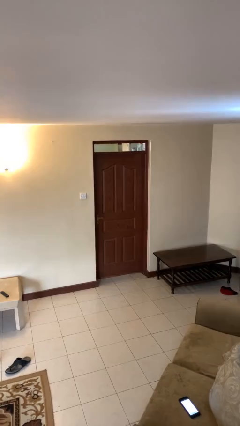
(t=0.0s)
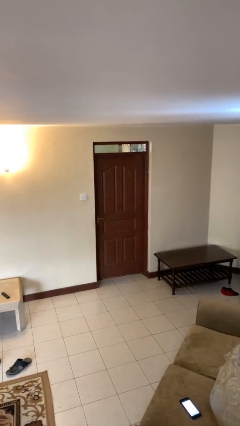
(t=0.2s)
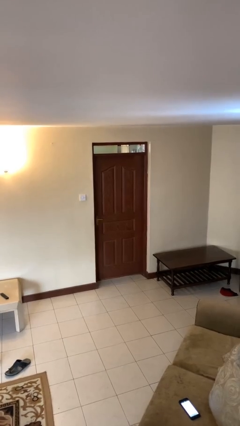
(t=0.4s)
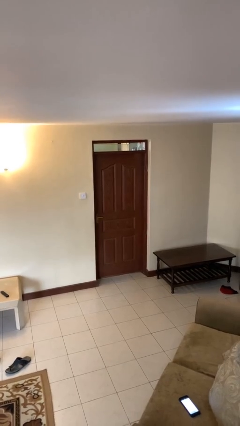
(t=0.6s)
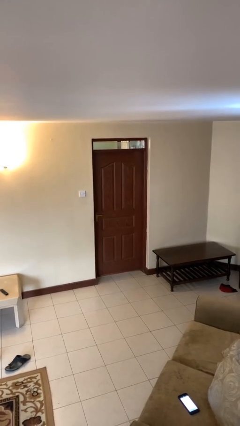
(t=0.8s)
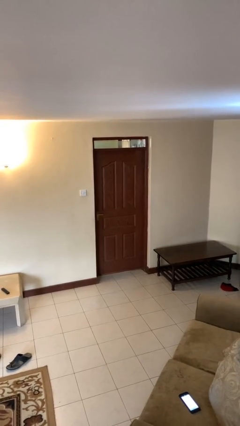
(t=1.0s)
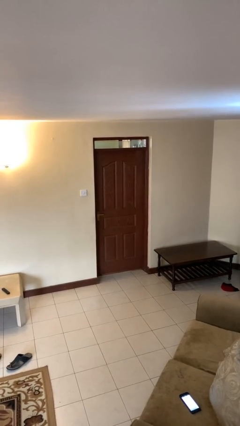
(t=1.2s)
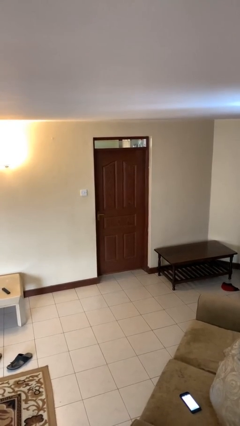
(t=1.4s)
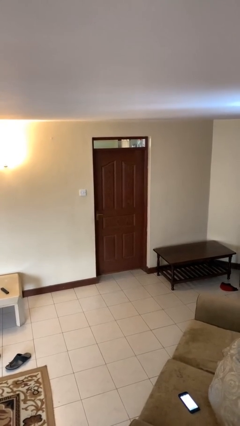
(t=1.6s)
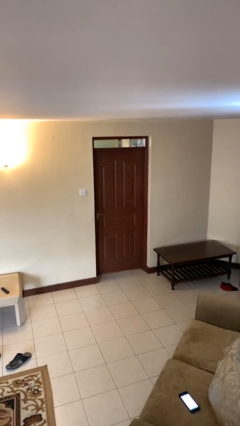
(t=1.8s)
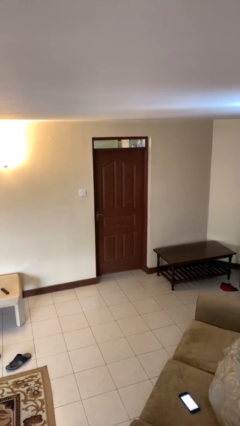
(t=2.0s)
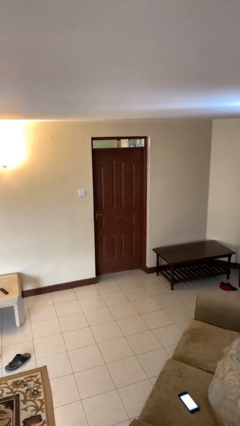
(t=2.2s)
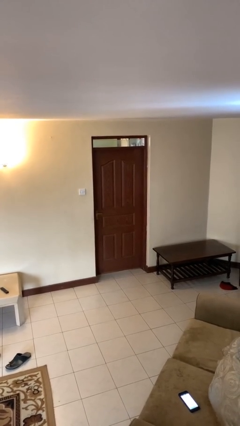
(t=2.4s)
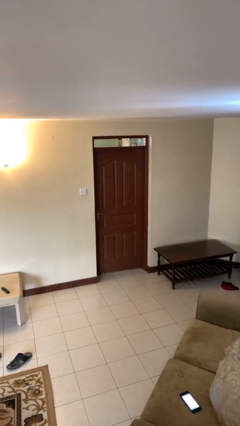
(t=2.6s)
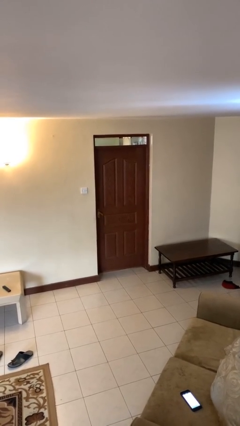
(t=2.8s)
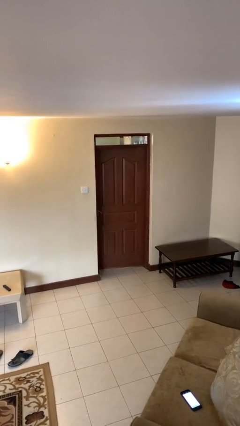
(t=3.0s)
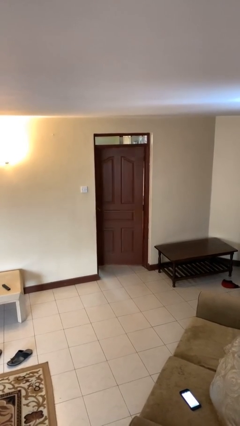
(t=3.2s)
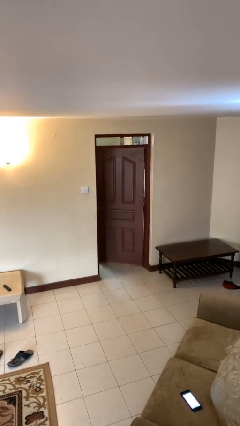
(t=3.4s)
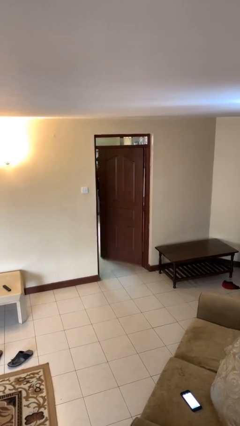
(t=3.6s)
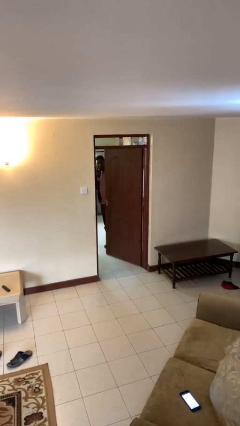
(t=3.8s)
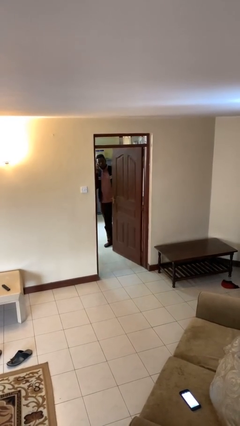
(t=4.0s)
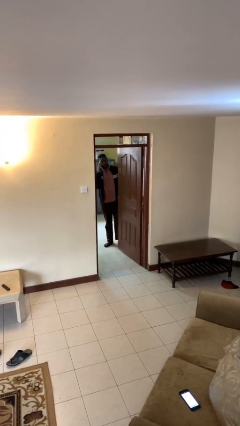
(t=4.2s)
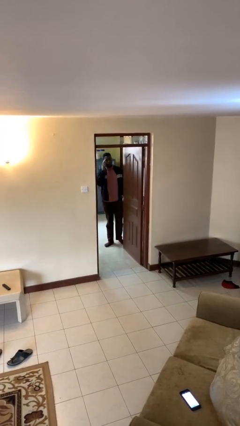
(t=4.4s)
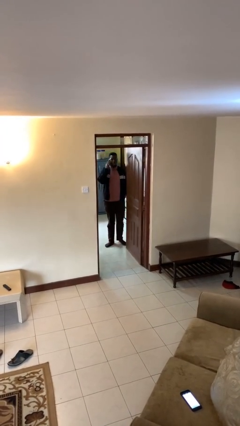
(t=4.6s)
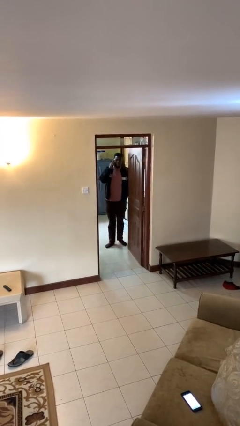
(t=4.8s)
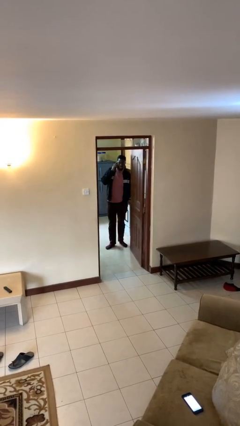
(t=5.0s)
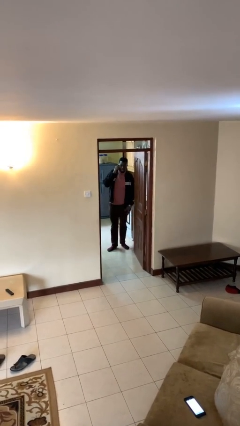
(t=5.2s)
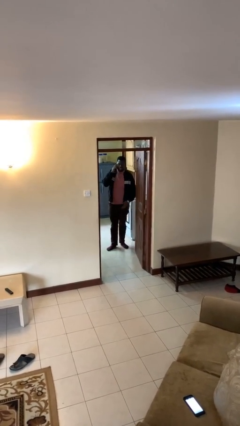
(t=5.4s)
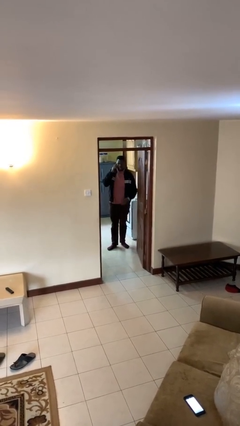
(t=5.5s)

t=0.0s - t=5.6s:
person opens facility door

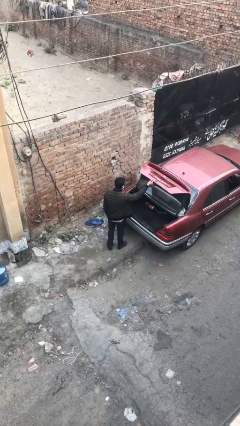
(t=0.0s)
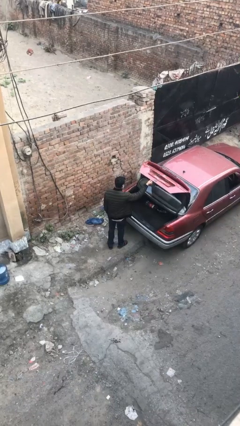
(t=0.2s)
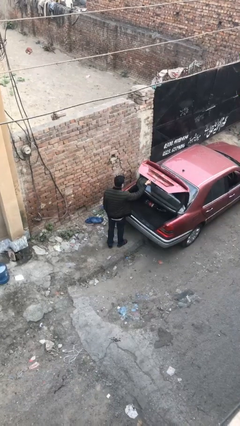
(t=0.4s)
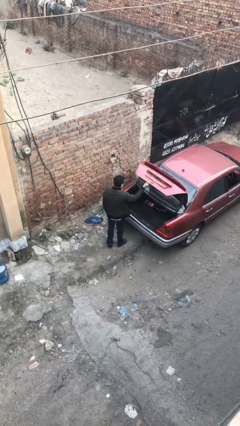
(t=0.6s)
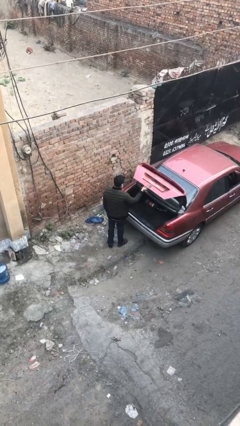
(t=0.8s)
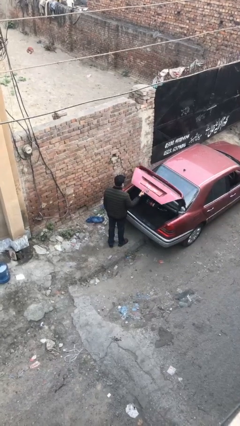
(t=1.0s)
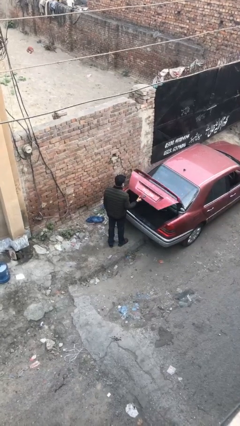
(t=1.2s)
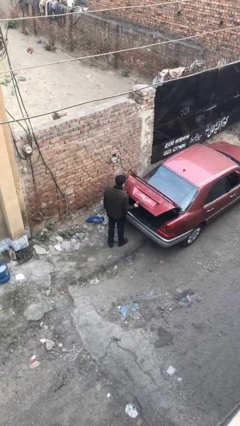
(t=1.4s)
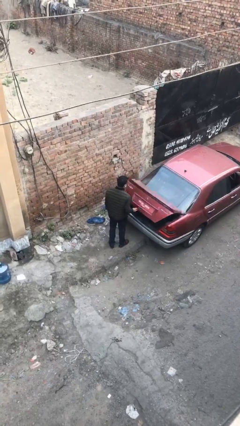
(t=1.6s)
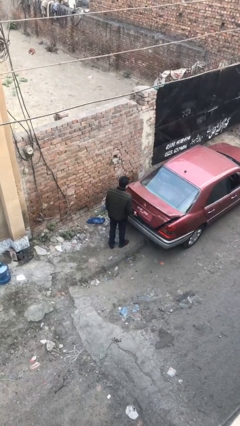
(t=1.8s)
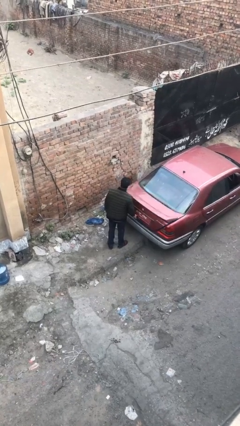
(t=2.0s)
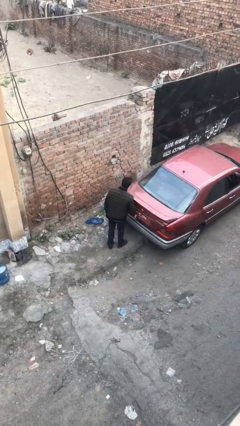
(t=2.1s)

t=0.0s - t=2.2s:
person closes car trunk

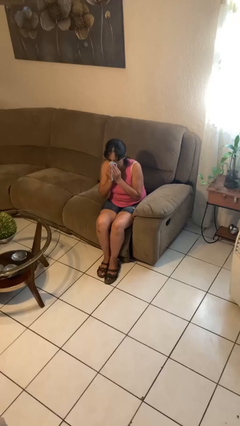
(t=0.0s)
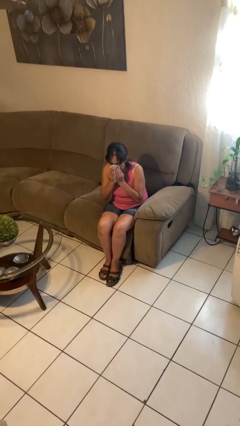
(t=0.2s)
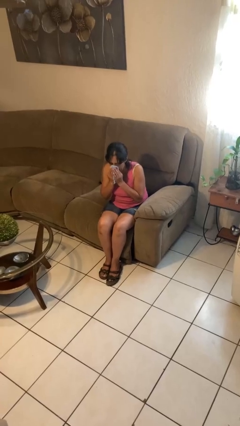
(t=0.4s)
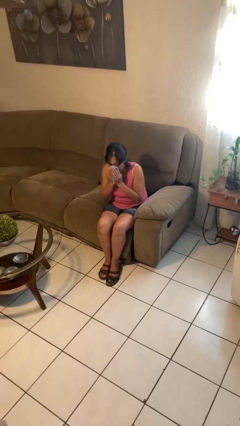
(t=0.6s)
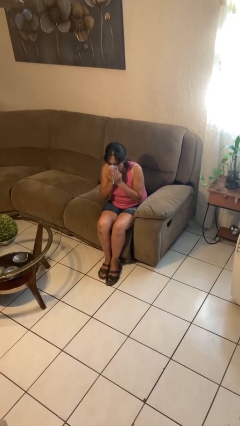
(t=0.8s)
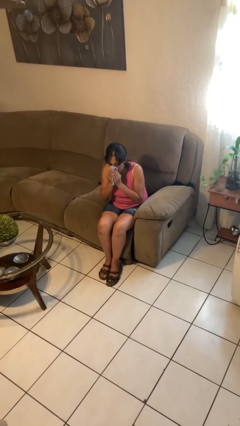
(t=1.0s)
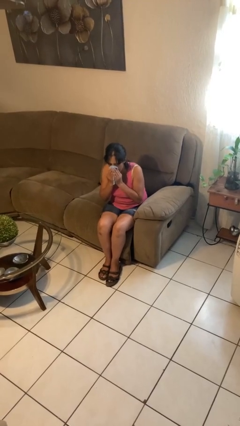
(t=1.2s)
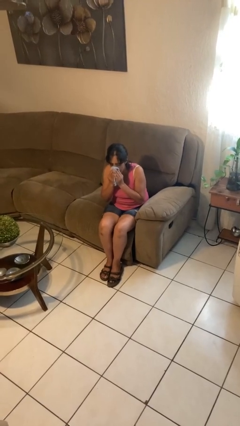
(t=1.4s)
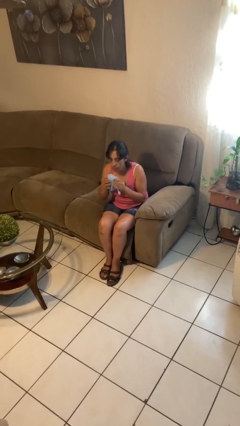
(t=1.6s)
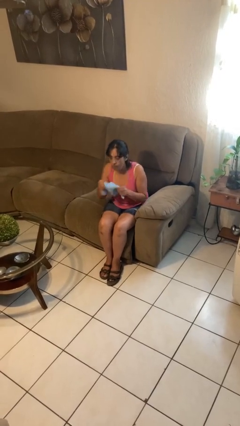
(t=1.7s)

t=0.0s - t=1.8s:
person blows nose

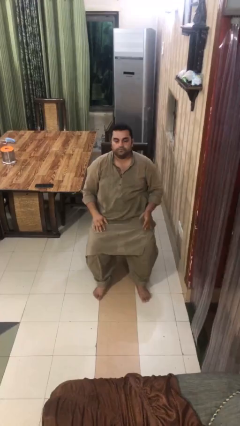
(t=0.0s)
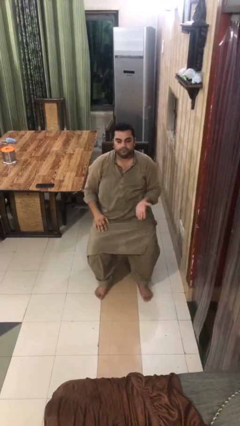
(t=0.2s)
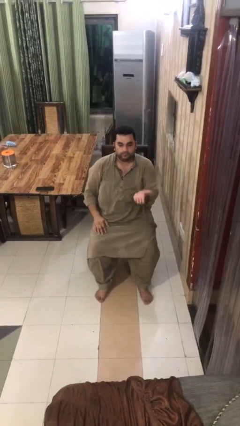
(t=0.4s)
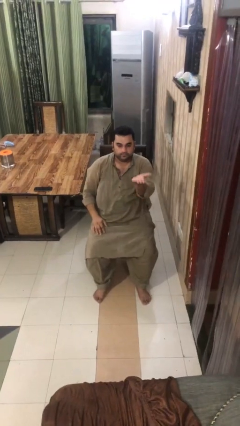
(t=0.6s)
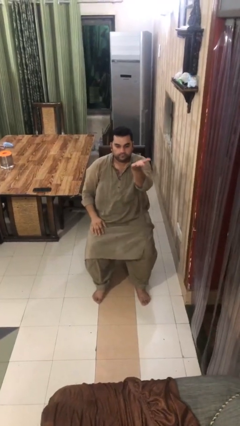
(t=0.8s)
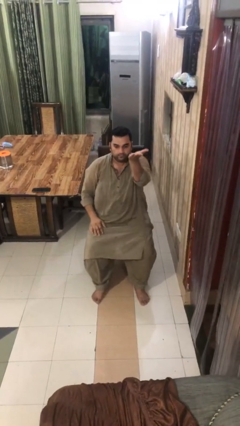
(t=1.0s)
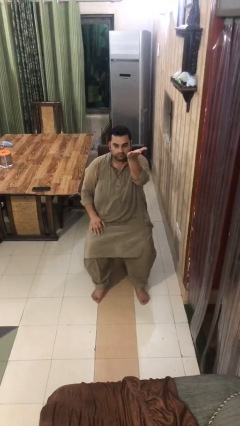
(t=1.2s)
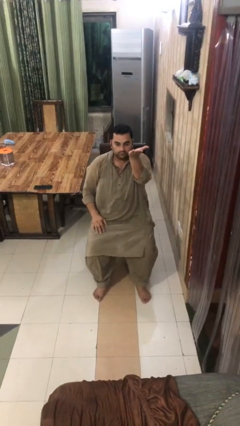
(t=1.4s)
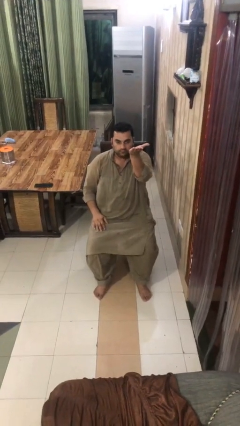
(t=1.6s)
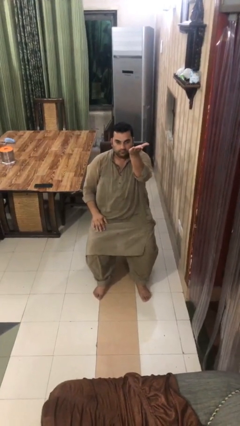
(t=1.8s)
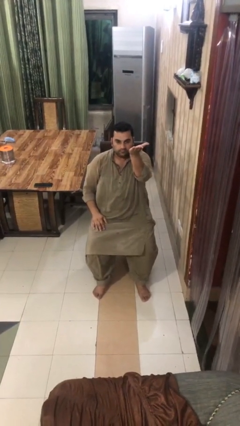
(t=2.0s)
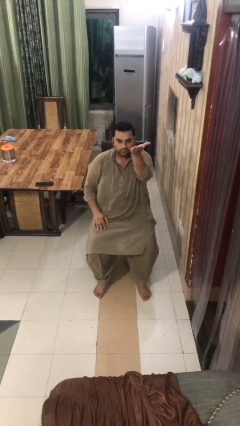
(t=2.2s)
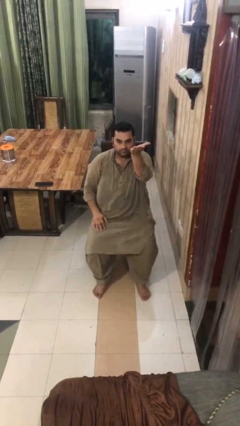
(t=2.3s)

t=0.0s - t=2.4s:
person gestures swipe up

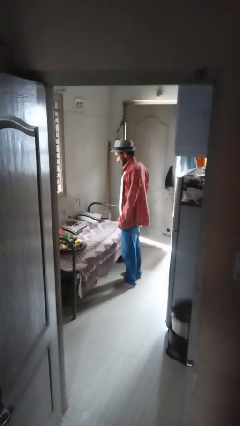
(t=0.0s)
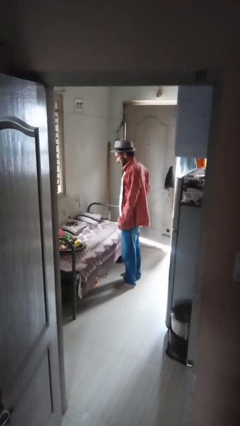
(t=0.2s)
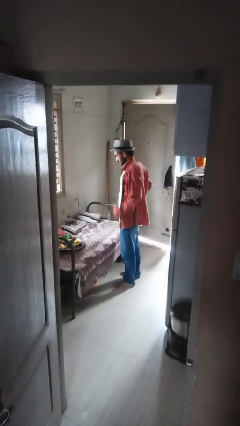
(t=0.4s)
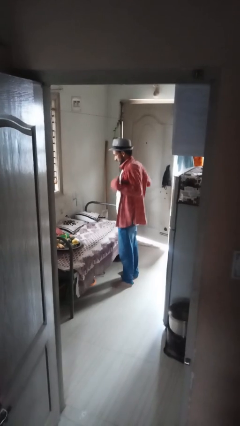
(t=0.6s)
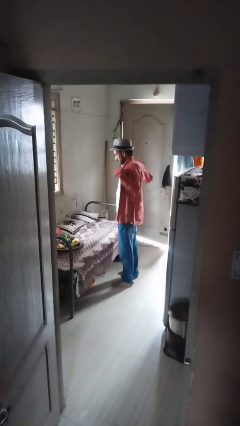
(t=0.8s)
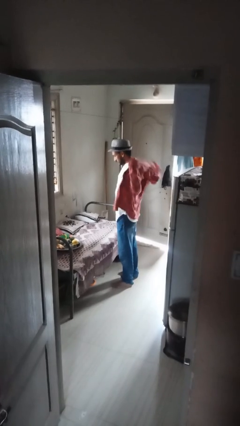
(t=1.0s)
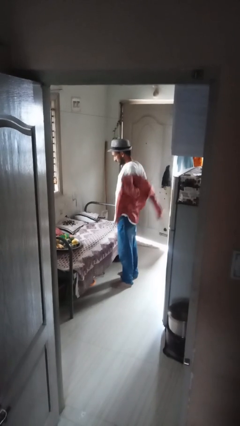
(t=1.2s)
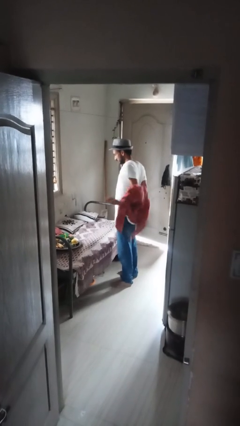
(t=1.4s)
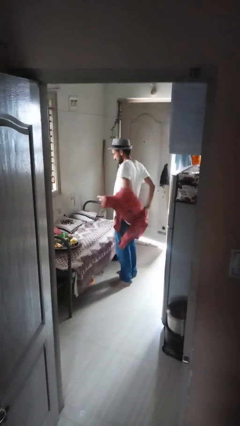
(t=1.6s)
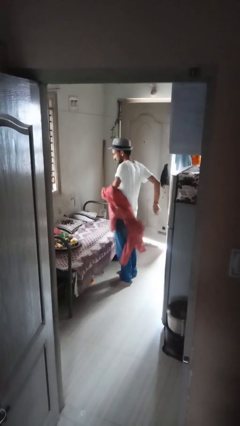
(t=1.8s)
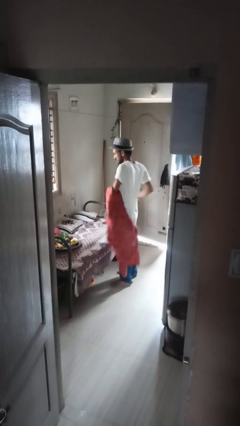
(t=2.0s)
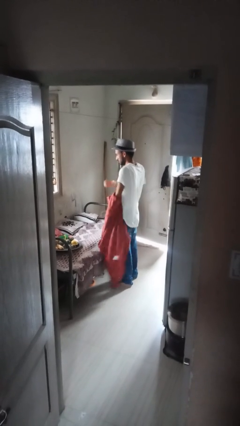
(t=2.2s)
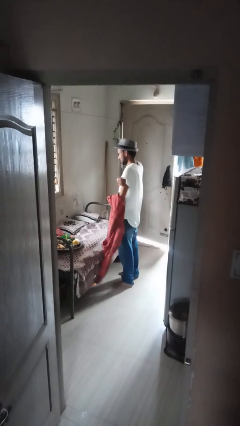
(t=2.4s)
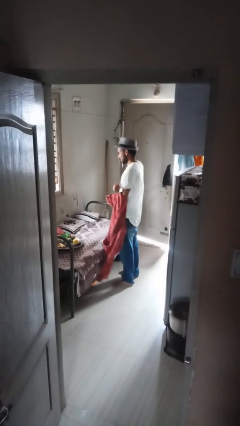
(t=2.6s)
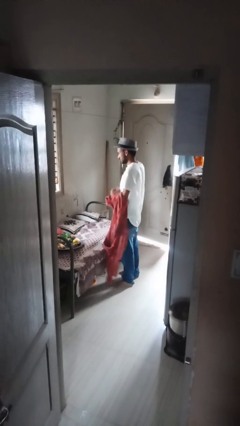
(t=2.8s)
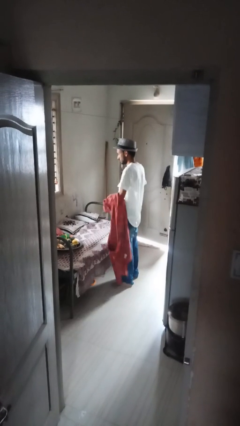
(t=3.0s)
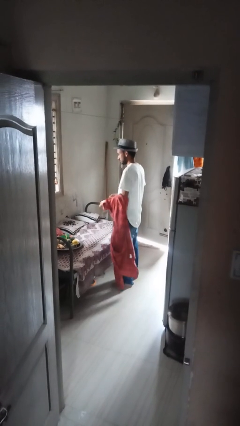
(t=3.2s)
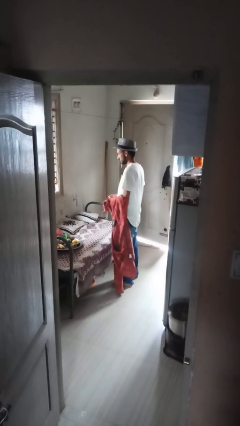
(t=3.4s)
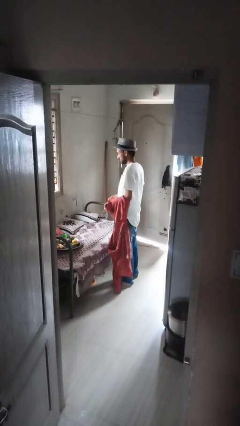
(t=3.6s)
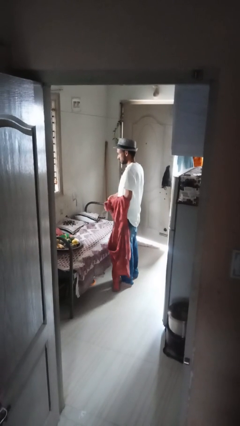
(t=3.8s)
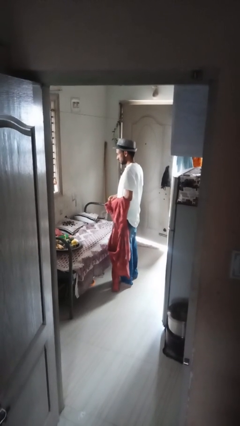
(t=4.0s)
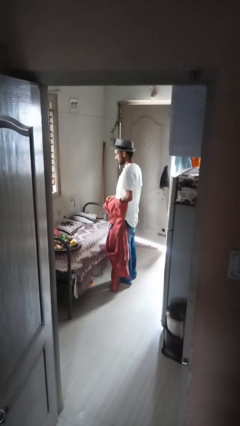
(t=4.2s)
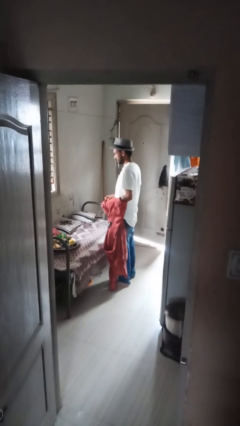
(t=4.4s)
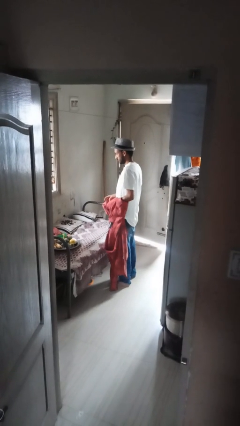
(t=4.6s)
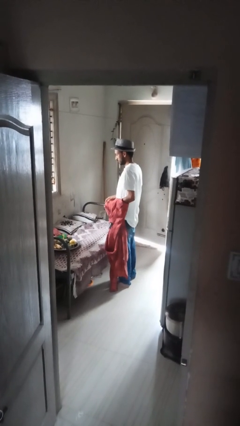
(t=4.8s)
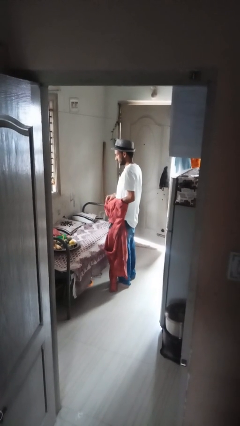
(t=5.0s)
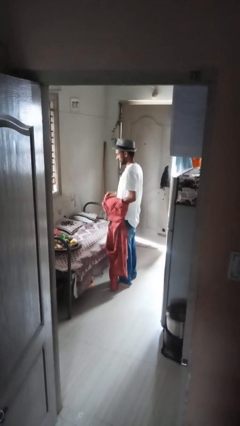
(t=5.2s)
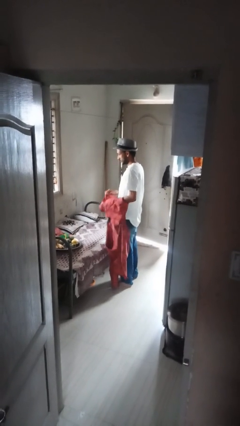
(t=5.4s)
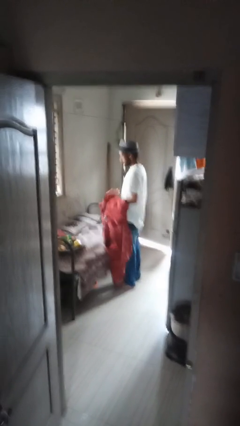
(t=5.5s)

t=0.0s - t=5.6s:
person takes off shirt
